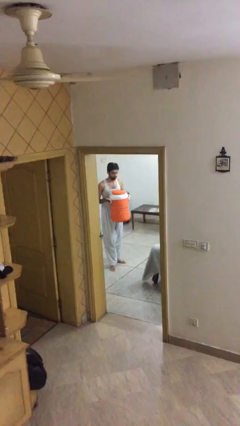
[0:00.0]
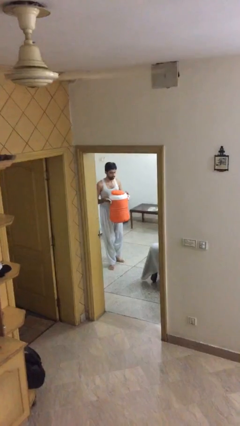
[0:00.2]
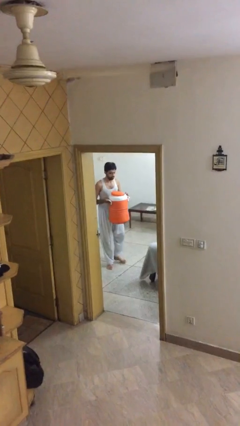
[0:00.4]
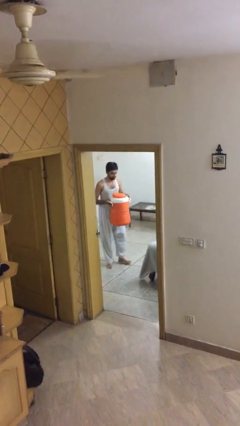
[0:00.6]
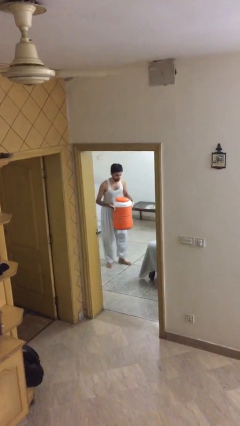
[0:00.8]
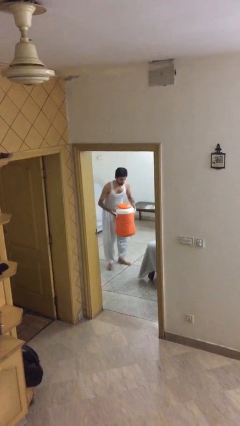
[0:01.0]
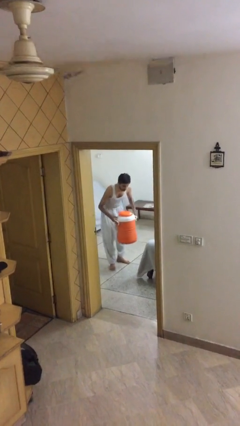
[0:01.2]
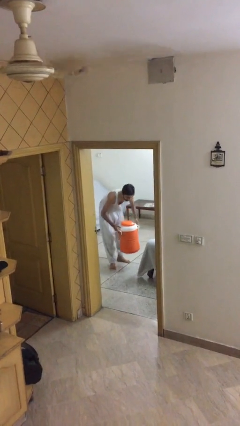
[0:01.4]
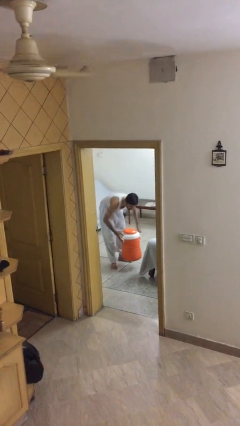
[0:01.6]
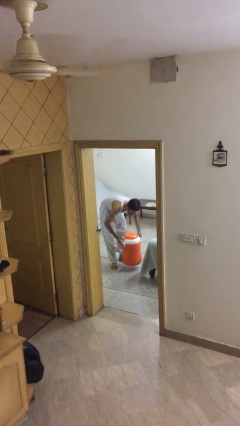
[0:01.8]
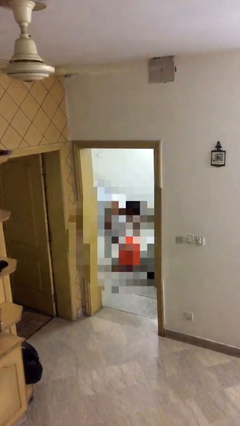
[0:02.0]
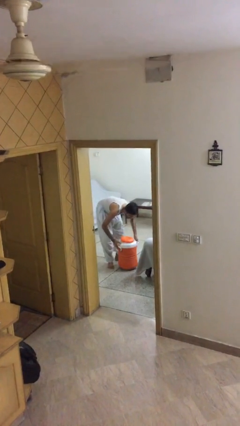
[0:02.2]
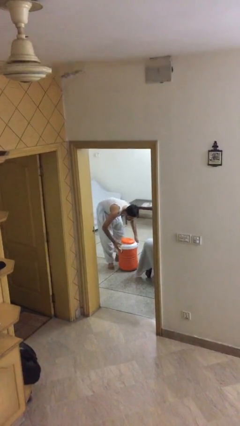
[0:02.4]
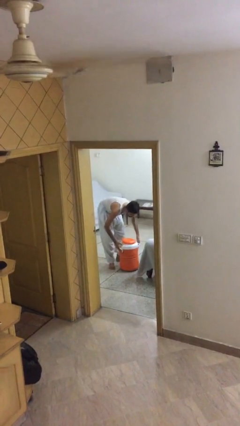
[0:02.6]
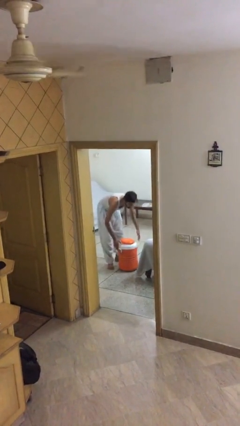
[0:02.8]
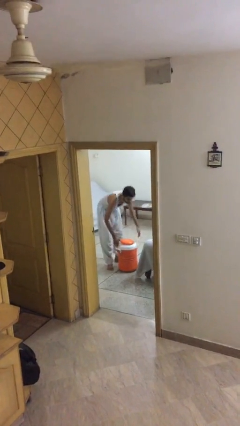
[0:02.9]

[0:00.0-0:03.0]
person puts down object on floor

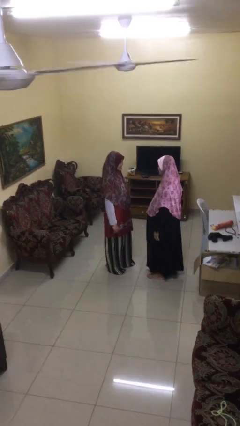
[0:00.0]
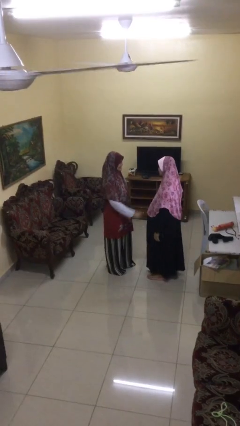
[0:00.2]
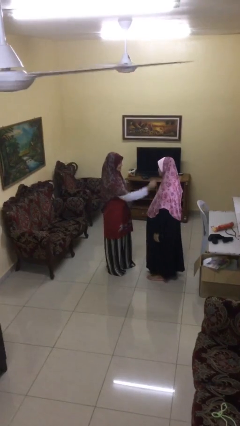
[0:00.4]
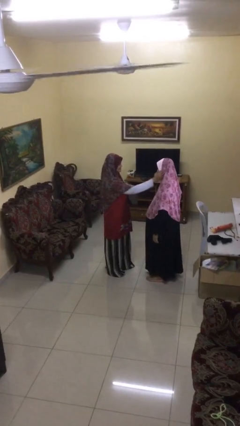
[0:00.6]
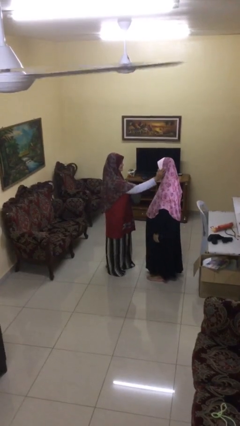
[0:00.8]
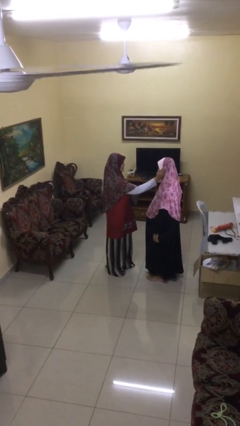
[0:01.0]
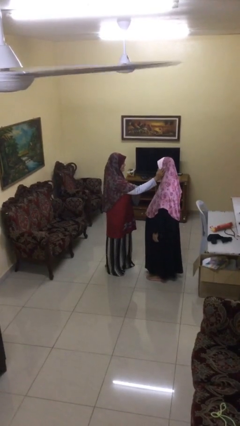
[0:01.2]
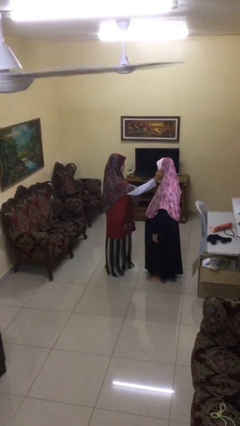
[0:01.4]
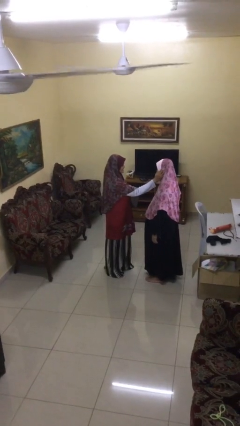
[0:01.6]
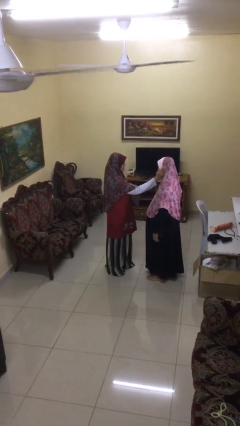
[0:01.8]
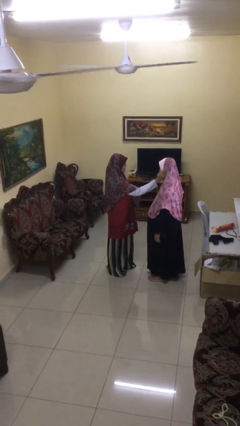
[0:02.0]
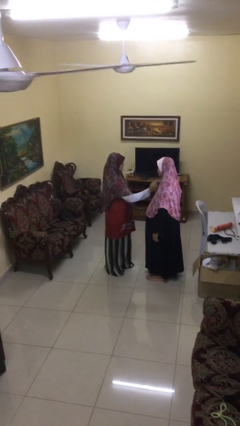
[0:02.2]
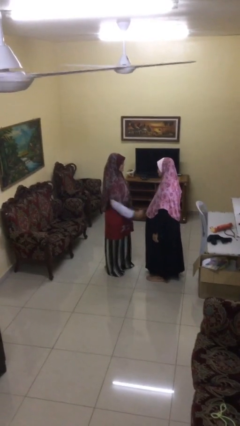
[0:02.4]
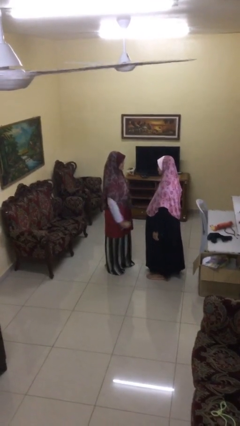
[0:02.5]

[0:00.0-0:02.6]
person touches face of person

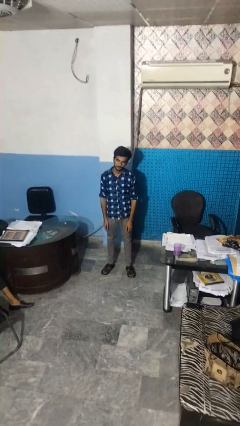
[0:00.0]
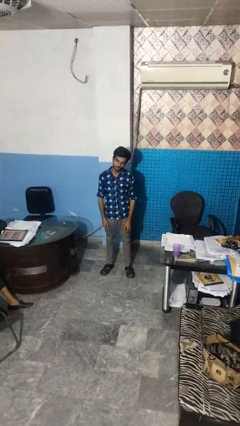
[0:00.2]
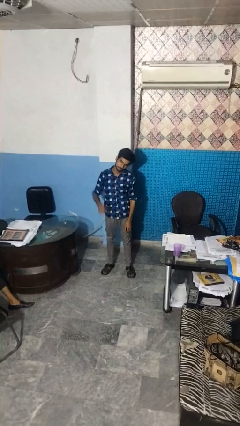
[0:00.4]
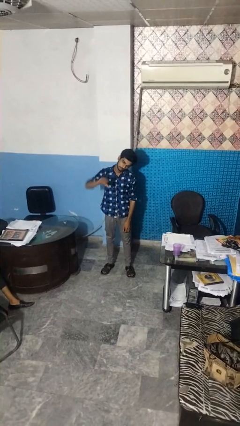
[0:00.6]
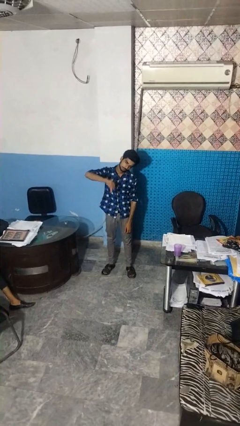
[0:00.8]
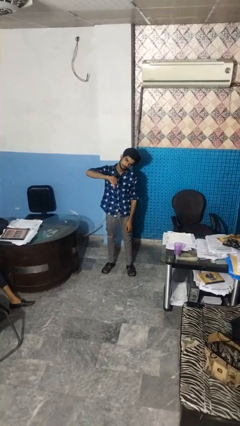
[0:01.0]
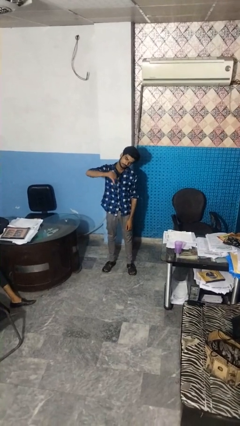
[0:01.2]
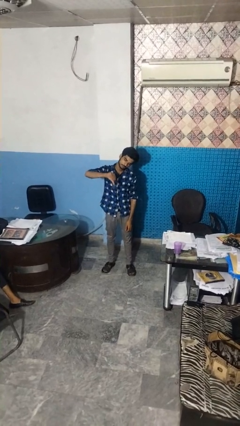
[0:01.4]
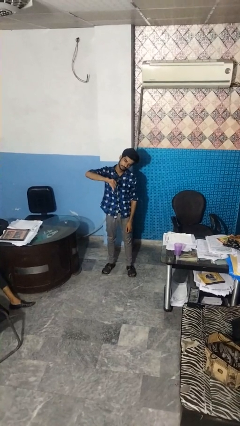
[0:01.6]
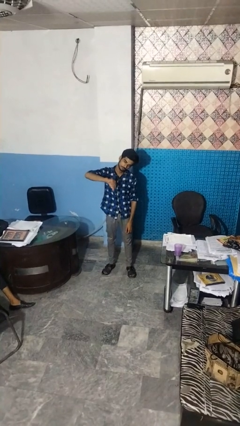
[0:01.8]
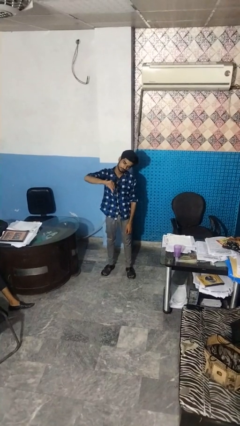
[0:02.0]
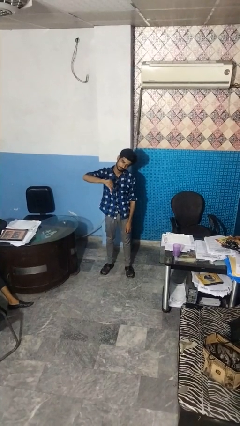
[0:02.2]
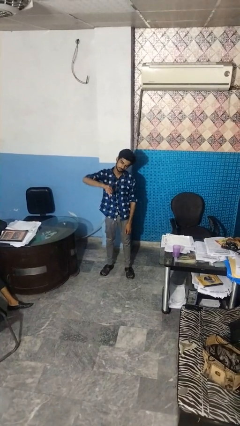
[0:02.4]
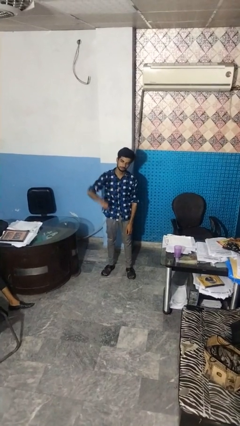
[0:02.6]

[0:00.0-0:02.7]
person gestures thumbs down

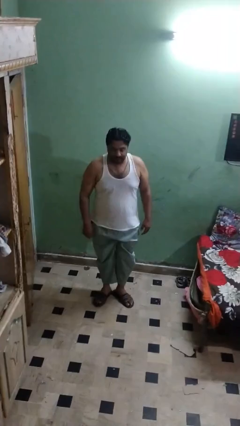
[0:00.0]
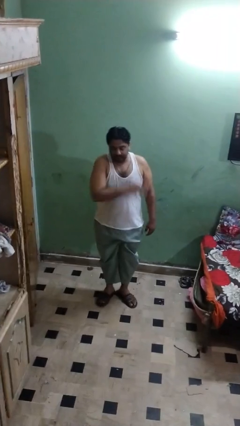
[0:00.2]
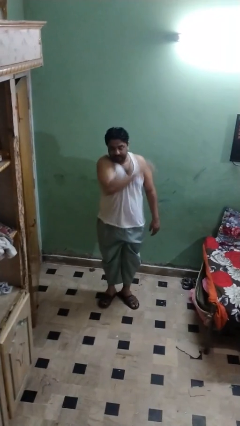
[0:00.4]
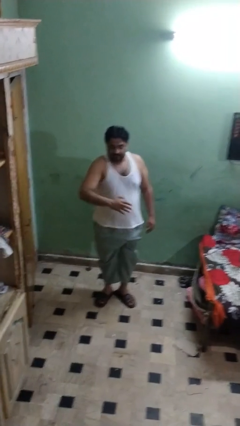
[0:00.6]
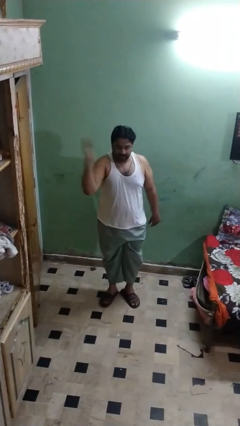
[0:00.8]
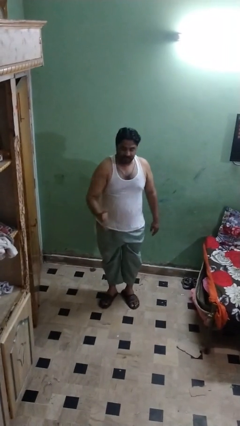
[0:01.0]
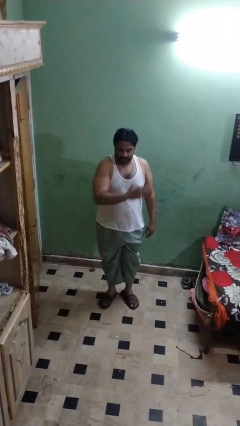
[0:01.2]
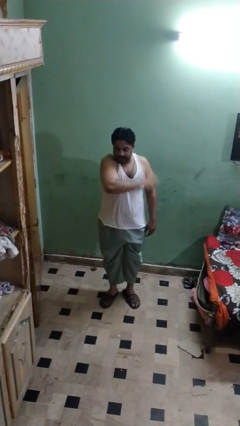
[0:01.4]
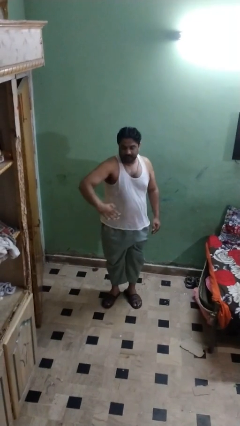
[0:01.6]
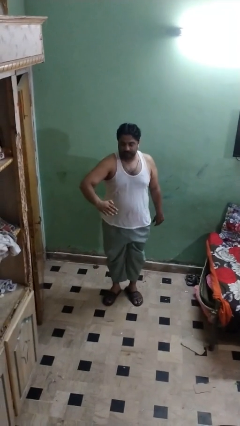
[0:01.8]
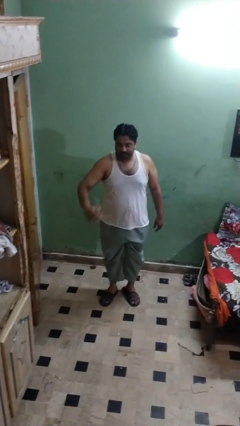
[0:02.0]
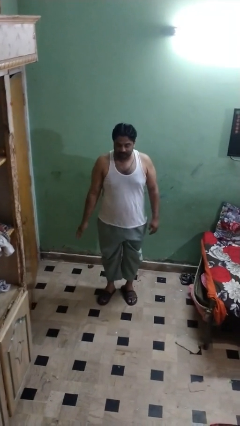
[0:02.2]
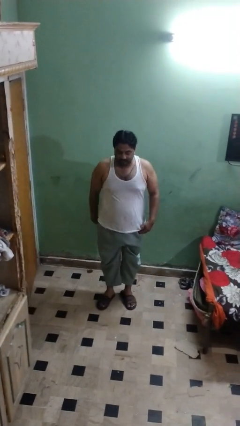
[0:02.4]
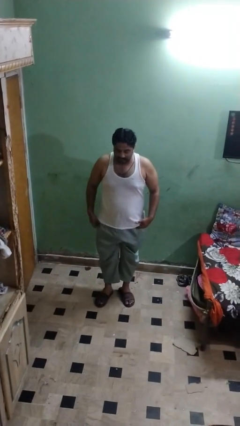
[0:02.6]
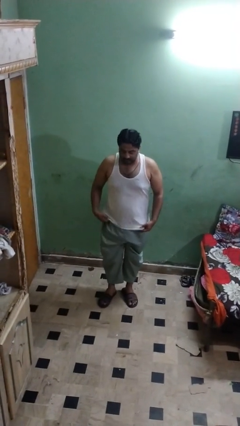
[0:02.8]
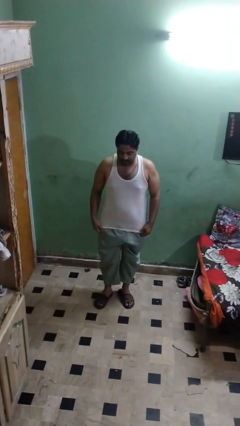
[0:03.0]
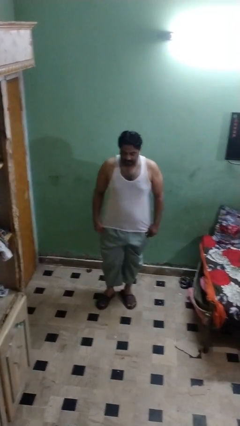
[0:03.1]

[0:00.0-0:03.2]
person karate chop

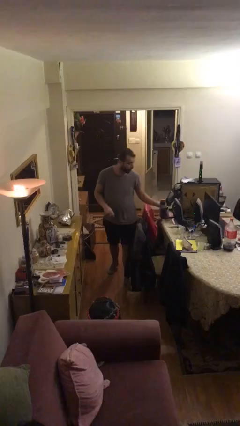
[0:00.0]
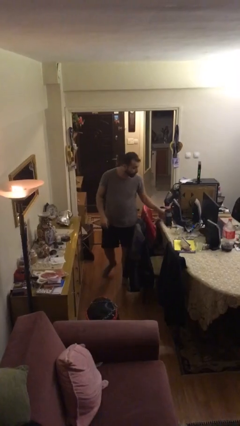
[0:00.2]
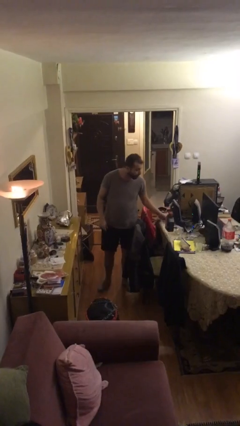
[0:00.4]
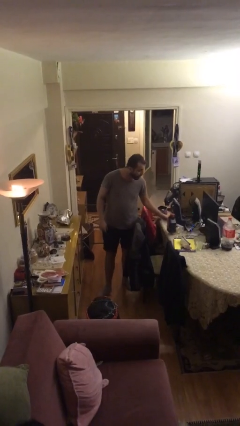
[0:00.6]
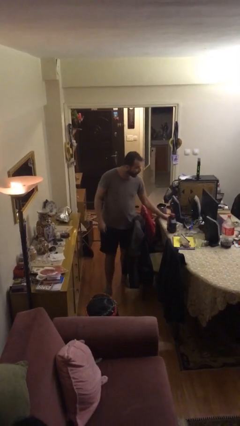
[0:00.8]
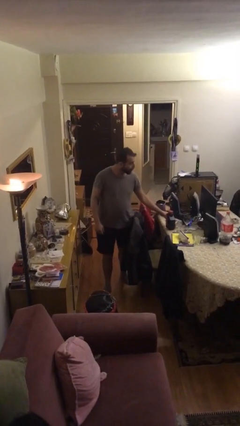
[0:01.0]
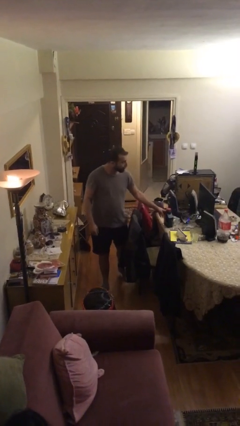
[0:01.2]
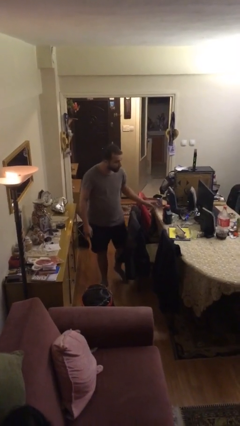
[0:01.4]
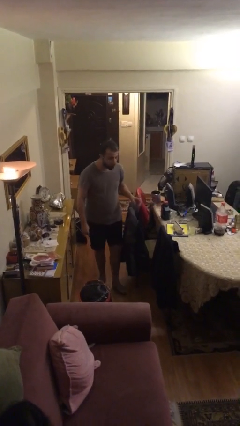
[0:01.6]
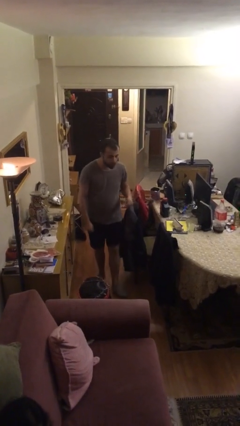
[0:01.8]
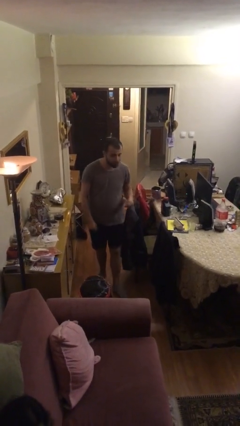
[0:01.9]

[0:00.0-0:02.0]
person puts down object on table

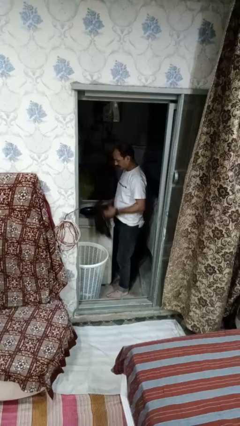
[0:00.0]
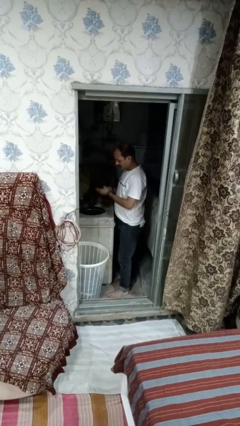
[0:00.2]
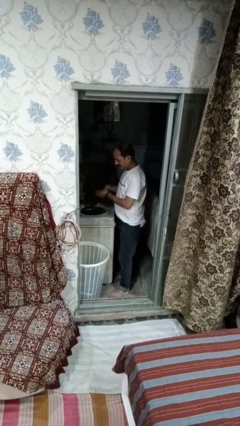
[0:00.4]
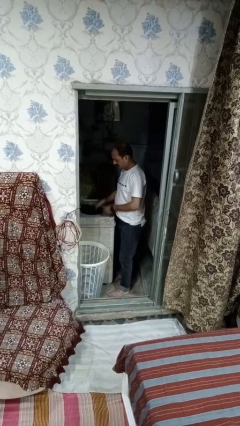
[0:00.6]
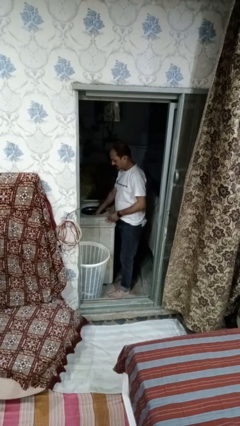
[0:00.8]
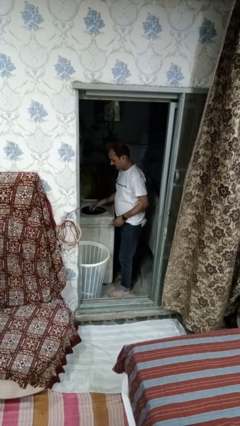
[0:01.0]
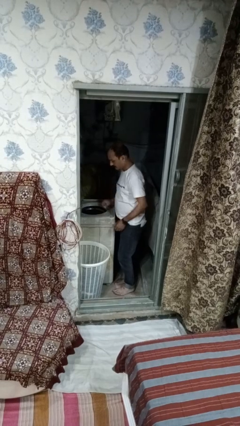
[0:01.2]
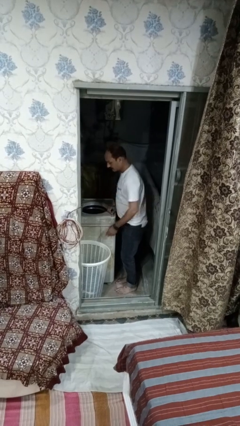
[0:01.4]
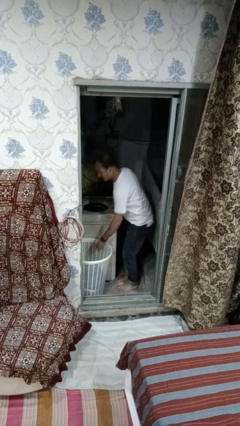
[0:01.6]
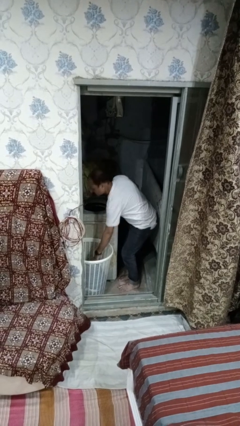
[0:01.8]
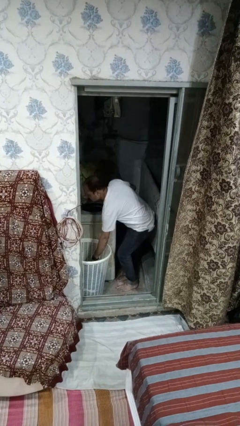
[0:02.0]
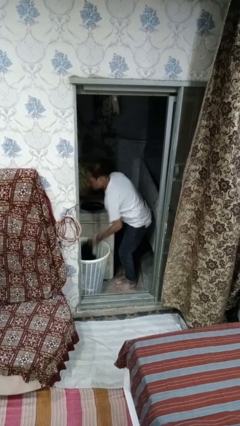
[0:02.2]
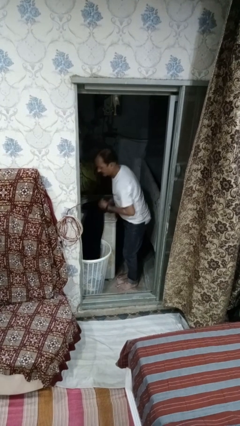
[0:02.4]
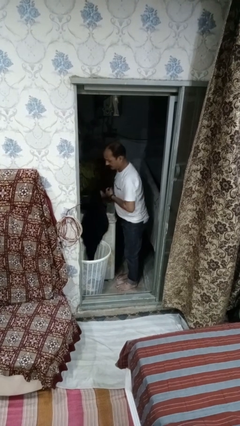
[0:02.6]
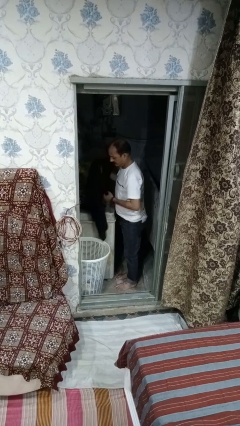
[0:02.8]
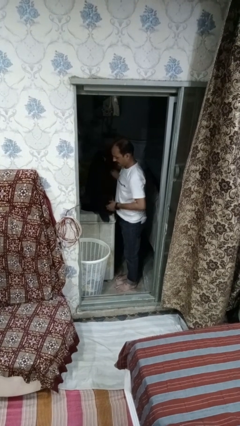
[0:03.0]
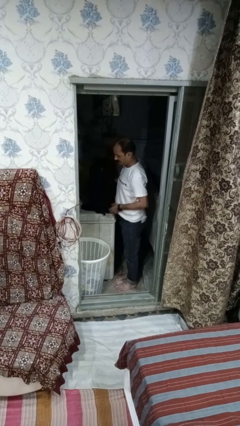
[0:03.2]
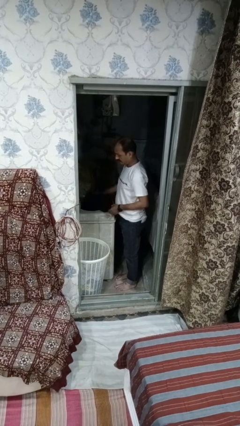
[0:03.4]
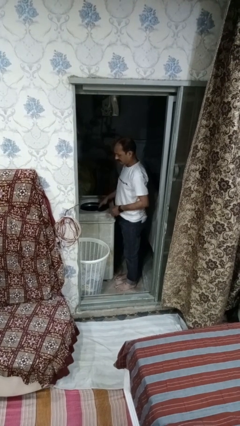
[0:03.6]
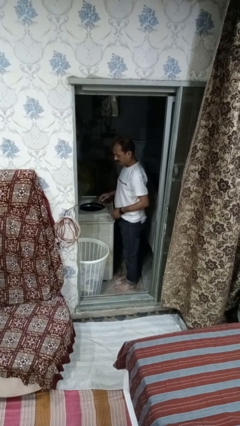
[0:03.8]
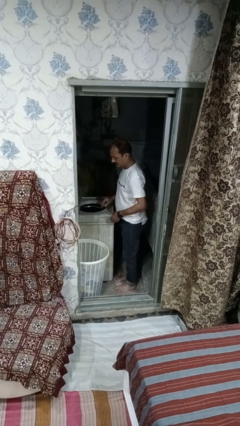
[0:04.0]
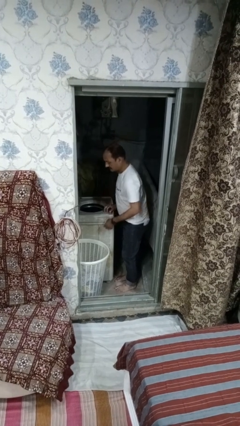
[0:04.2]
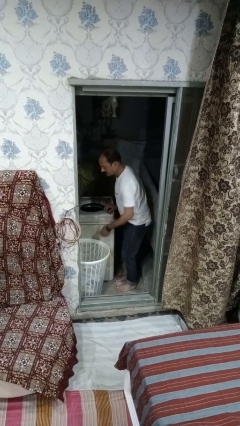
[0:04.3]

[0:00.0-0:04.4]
person loads dryer
